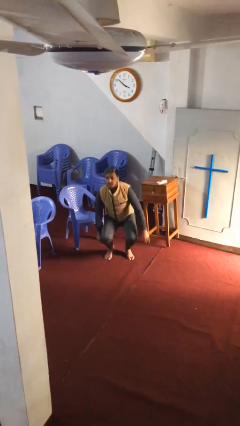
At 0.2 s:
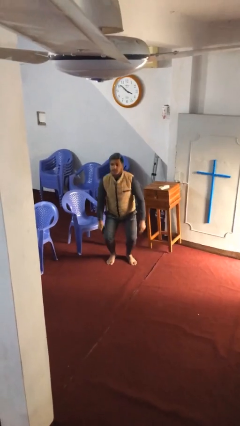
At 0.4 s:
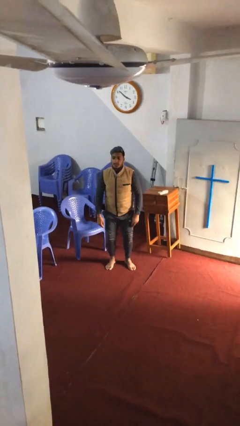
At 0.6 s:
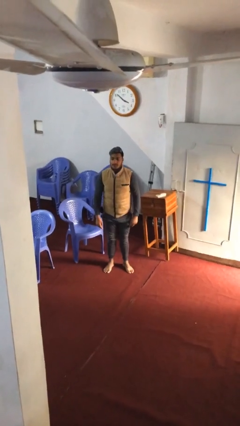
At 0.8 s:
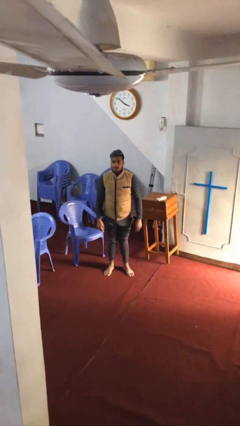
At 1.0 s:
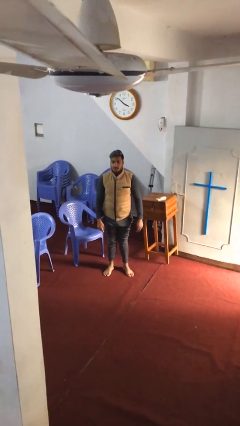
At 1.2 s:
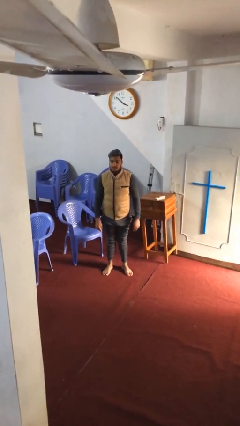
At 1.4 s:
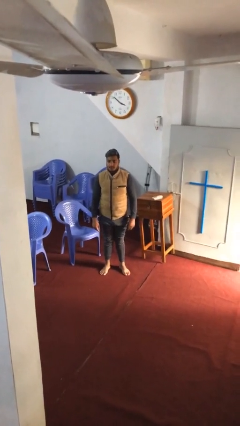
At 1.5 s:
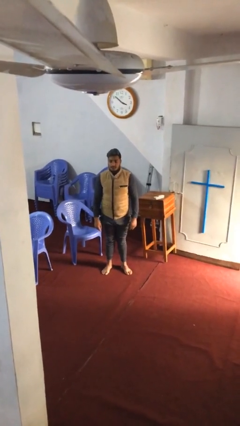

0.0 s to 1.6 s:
person stands up

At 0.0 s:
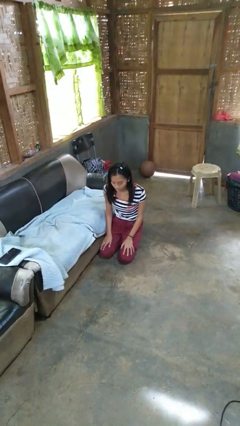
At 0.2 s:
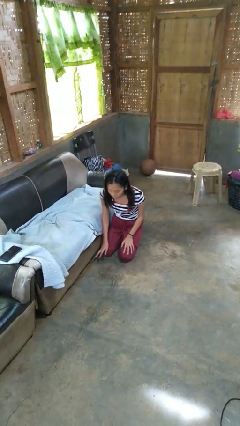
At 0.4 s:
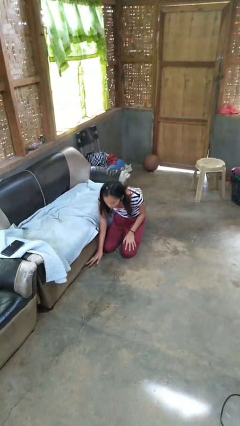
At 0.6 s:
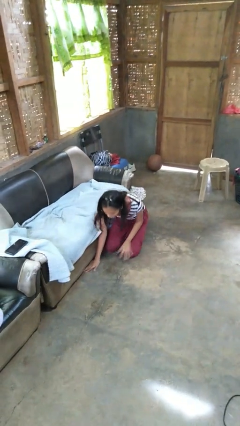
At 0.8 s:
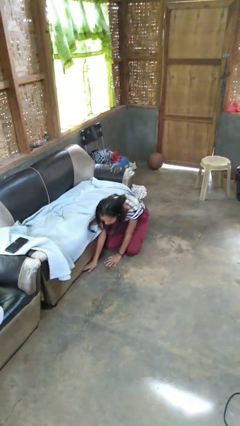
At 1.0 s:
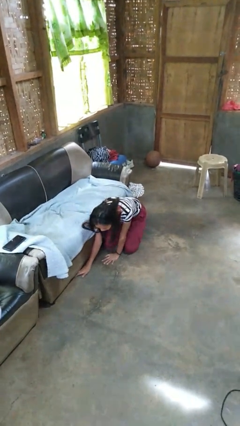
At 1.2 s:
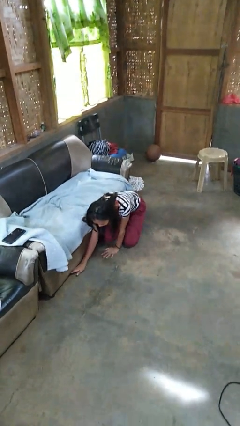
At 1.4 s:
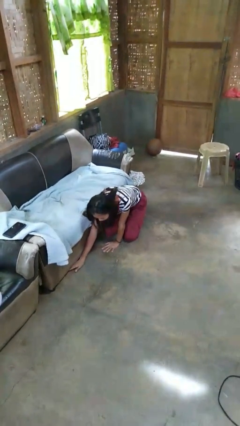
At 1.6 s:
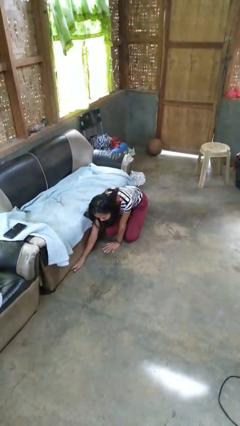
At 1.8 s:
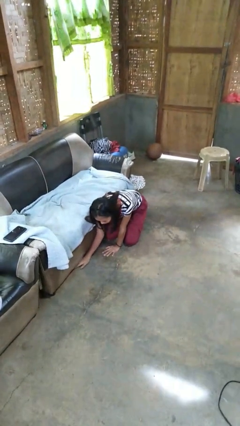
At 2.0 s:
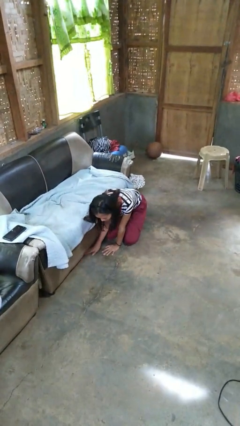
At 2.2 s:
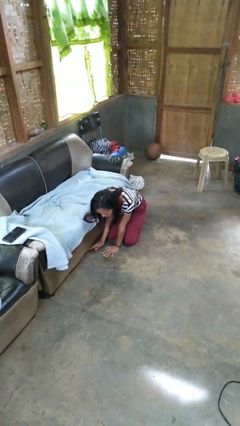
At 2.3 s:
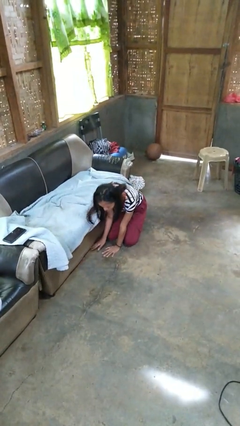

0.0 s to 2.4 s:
person searches under couch

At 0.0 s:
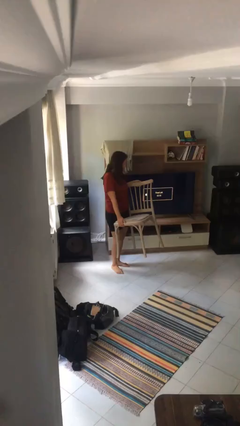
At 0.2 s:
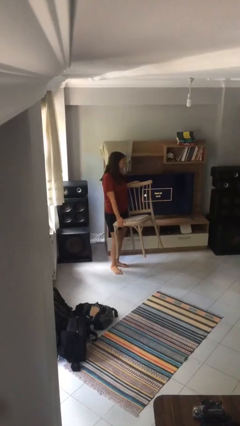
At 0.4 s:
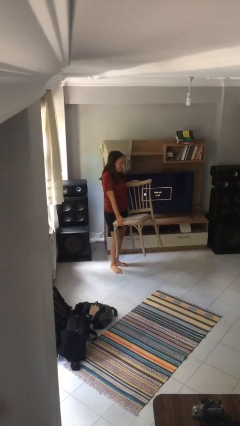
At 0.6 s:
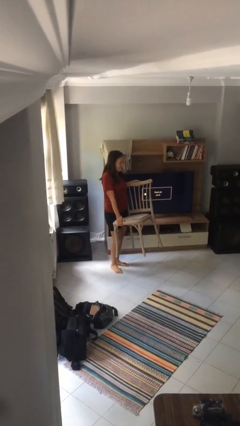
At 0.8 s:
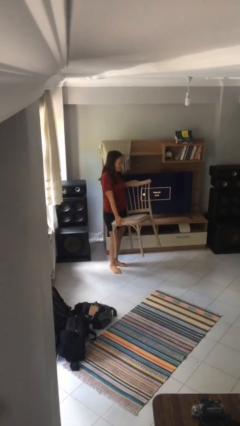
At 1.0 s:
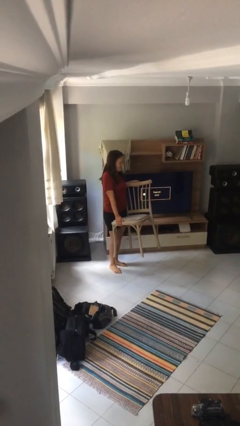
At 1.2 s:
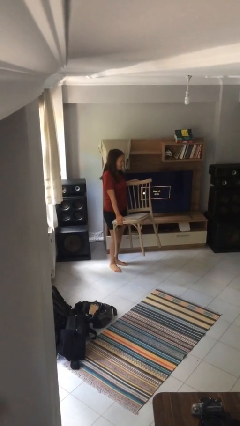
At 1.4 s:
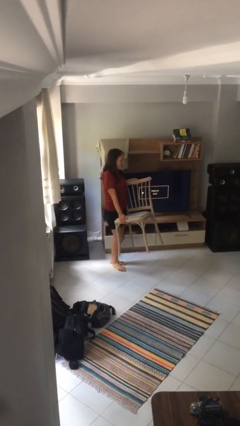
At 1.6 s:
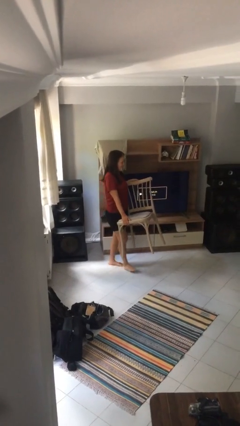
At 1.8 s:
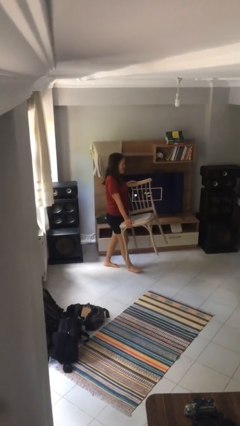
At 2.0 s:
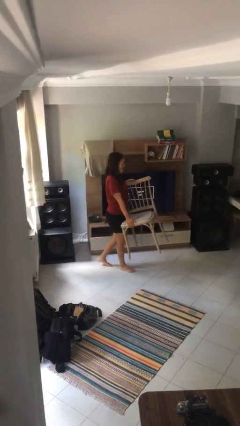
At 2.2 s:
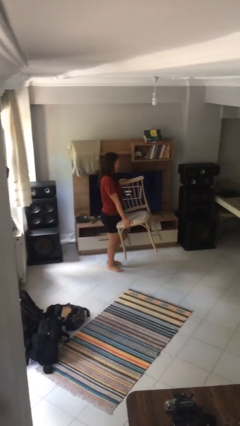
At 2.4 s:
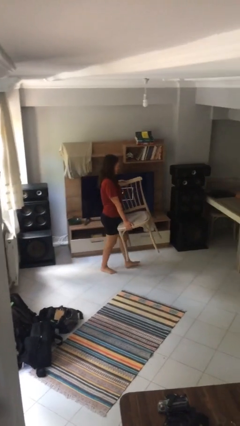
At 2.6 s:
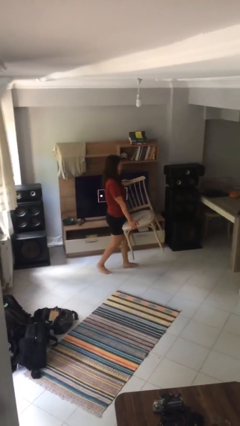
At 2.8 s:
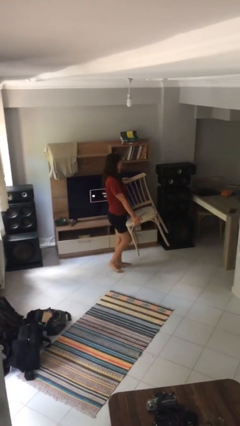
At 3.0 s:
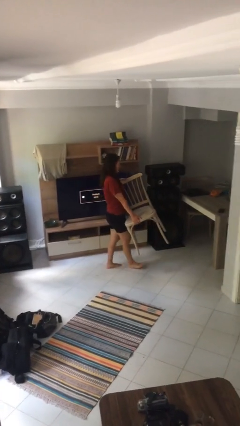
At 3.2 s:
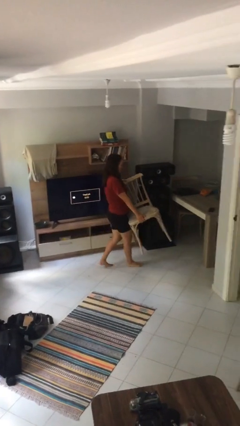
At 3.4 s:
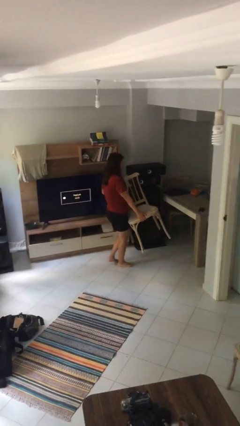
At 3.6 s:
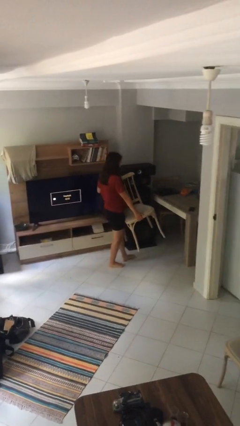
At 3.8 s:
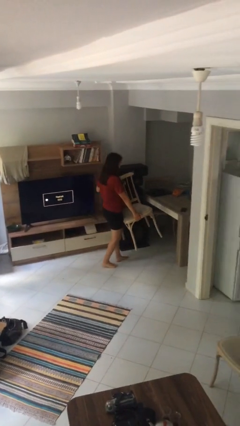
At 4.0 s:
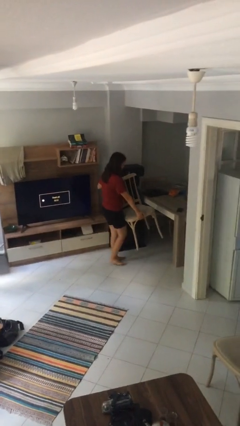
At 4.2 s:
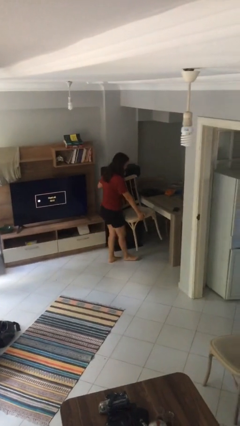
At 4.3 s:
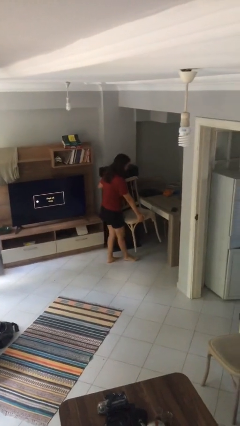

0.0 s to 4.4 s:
person carries heavy object

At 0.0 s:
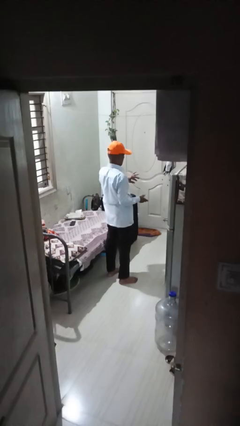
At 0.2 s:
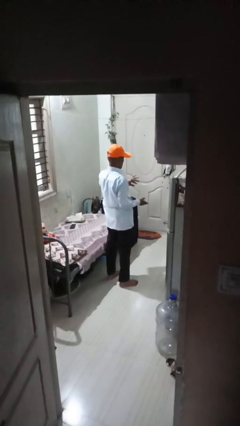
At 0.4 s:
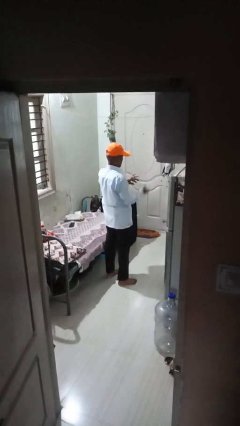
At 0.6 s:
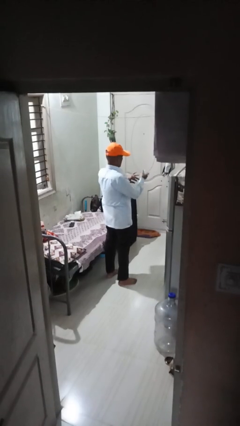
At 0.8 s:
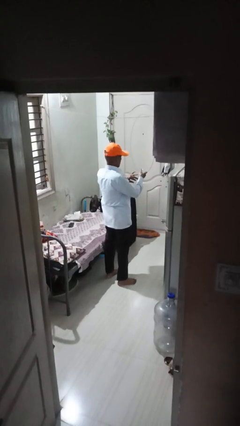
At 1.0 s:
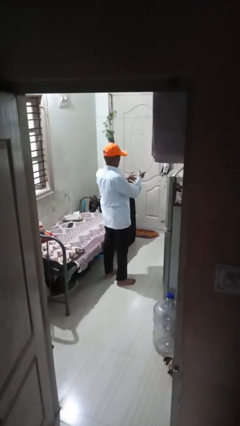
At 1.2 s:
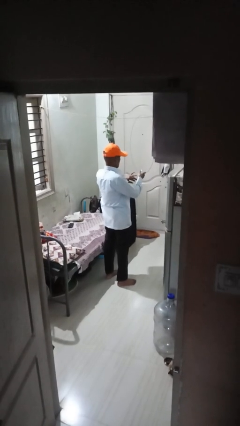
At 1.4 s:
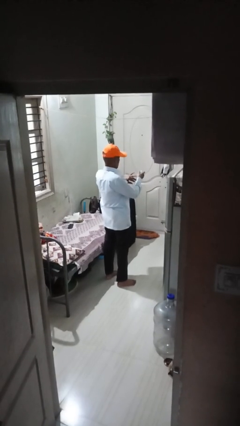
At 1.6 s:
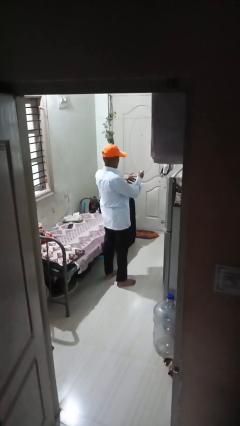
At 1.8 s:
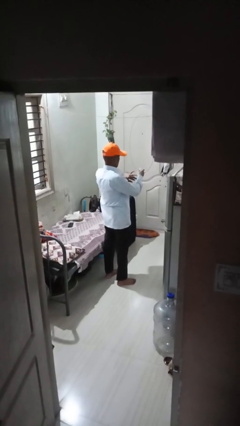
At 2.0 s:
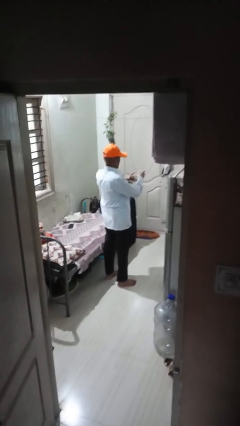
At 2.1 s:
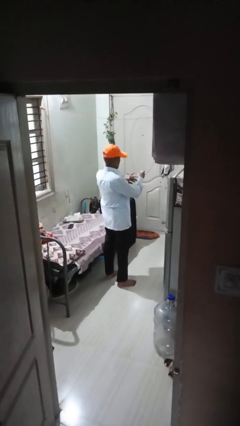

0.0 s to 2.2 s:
person clips fingernails

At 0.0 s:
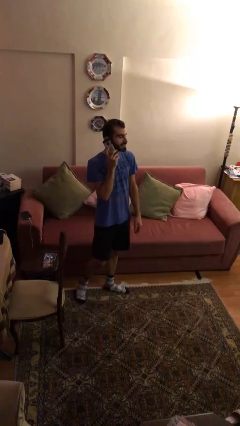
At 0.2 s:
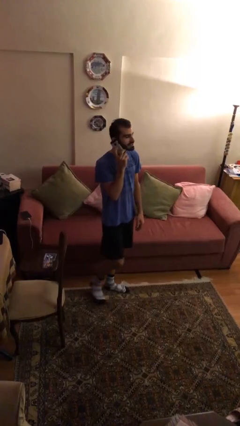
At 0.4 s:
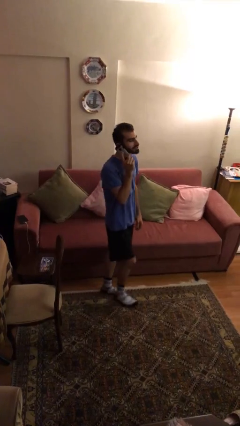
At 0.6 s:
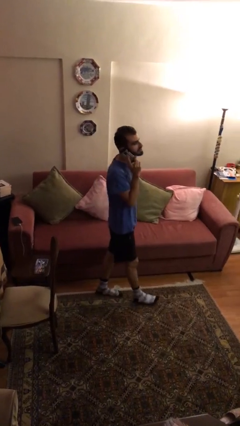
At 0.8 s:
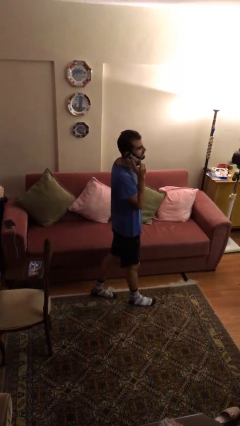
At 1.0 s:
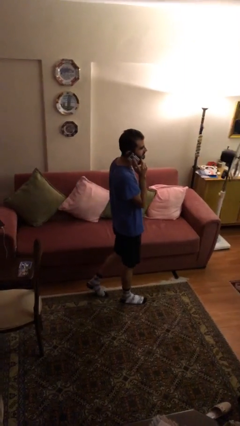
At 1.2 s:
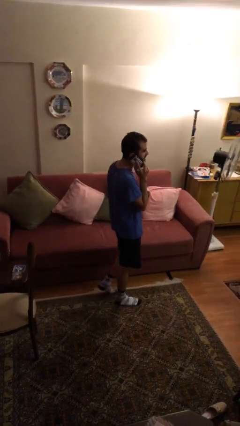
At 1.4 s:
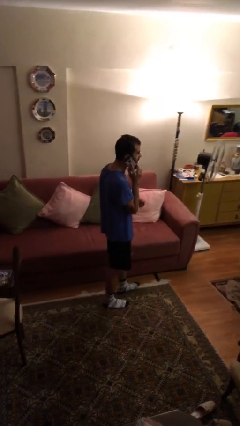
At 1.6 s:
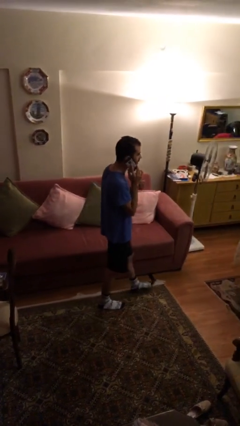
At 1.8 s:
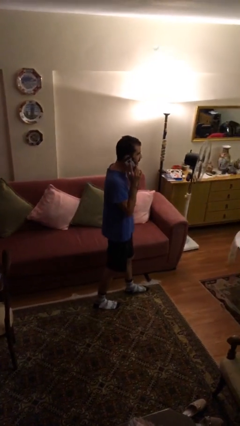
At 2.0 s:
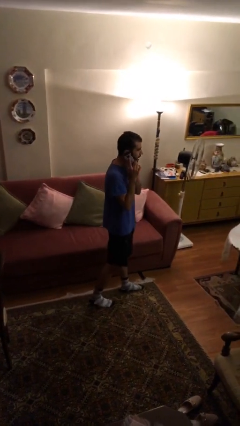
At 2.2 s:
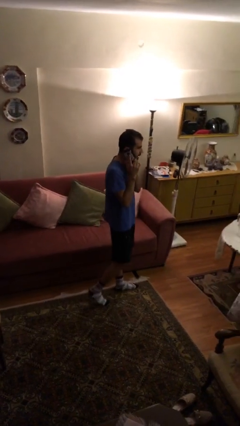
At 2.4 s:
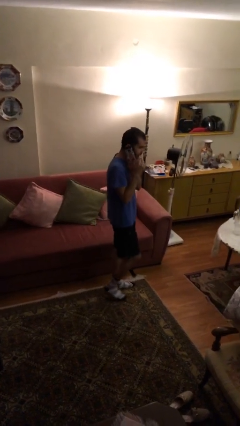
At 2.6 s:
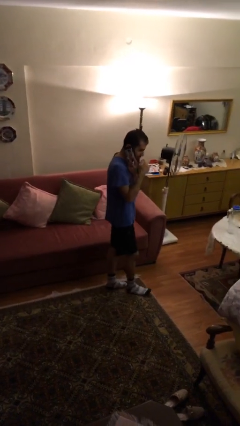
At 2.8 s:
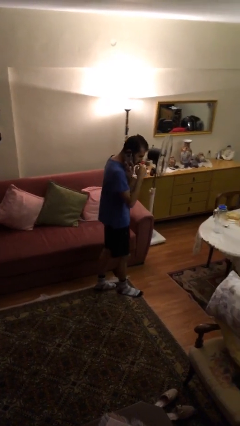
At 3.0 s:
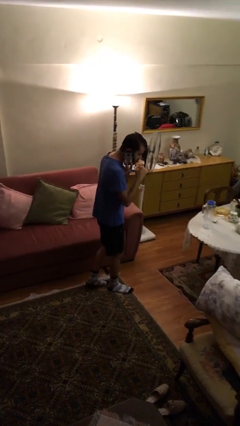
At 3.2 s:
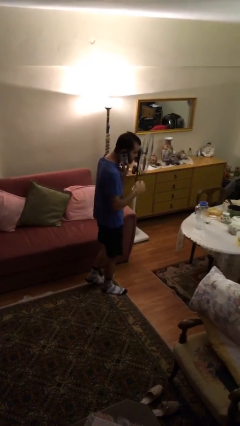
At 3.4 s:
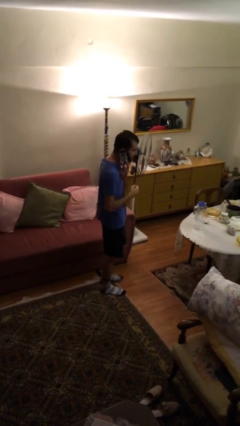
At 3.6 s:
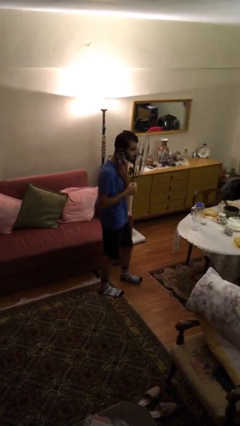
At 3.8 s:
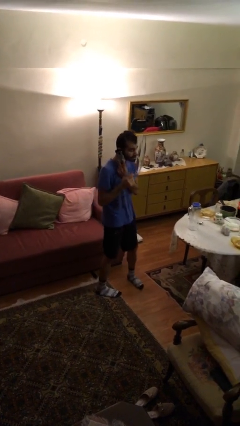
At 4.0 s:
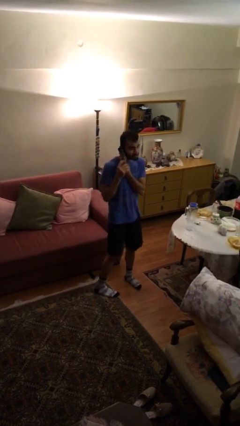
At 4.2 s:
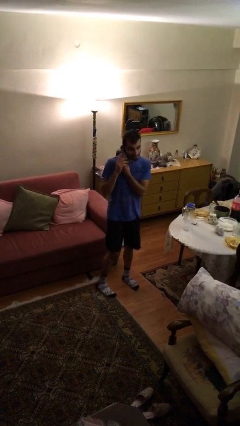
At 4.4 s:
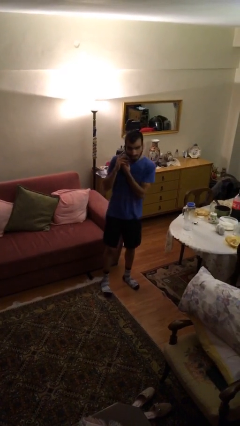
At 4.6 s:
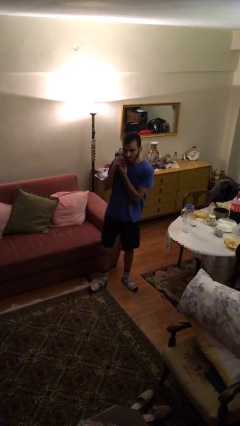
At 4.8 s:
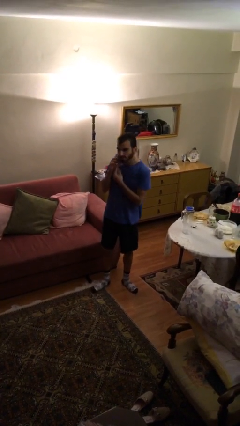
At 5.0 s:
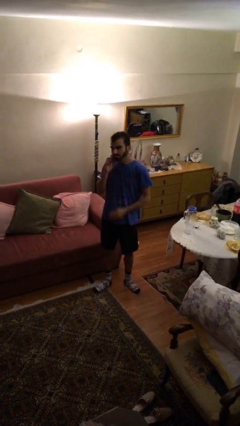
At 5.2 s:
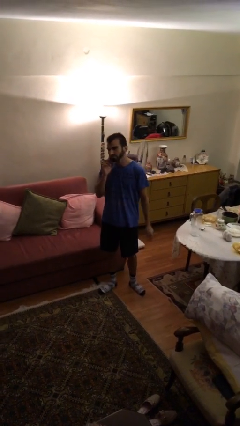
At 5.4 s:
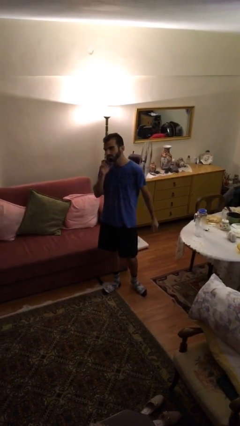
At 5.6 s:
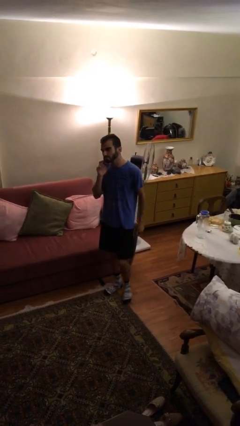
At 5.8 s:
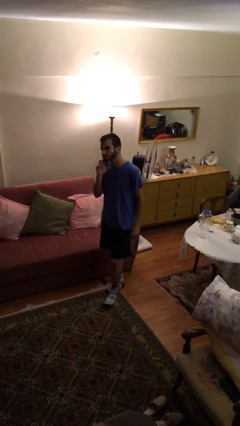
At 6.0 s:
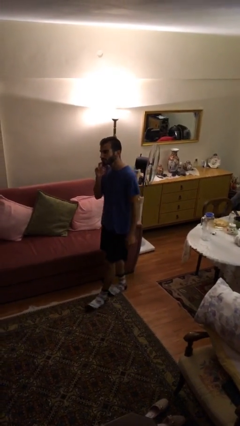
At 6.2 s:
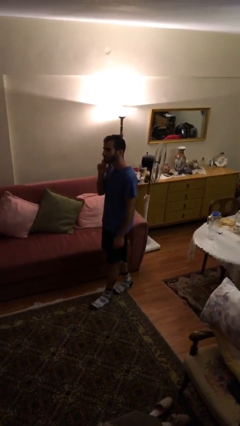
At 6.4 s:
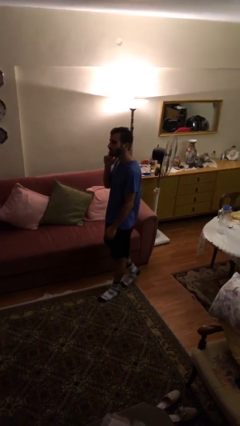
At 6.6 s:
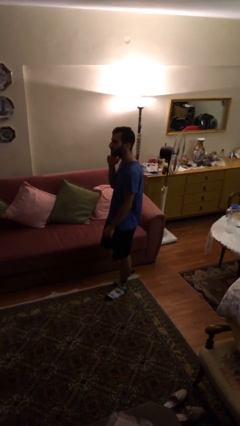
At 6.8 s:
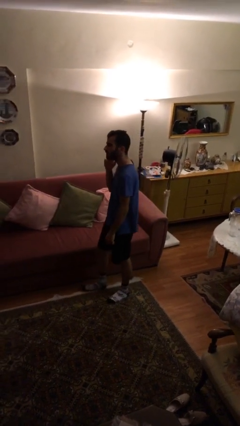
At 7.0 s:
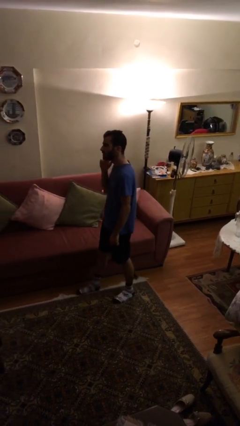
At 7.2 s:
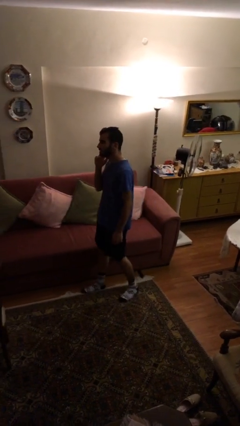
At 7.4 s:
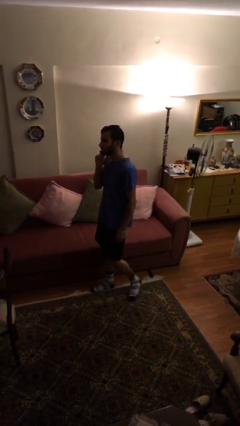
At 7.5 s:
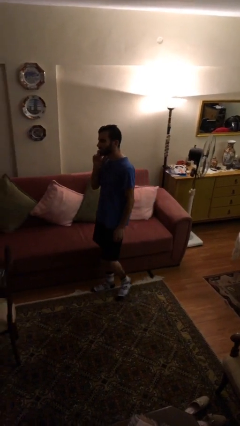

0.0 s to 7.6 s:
person talks on phone
